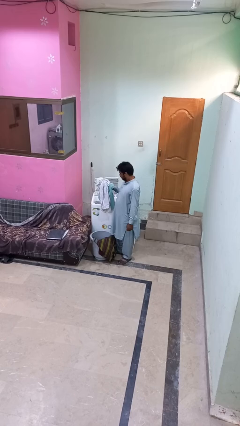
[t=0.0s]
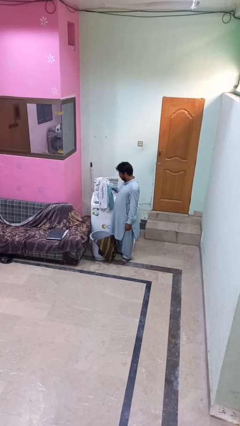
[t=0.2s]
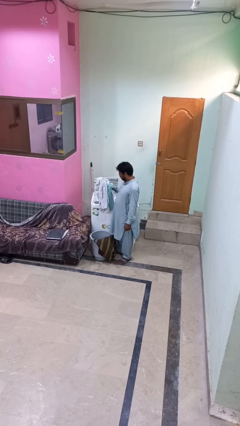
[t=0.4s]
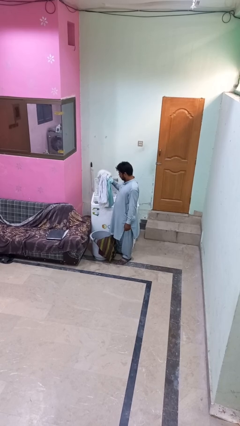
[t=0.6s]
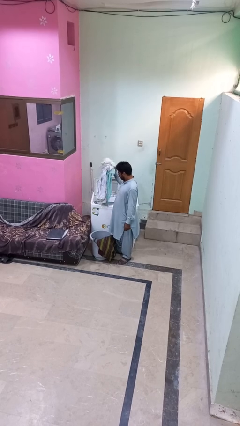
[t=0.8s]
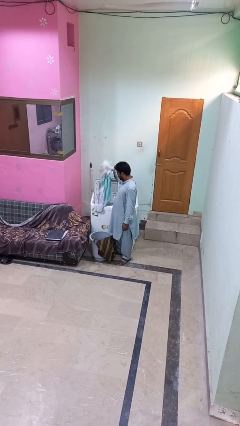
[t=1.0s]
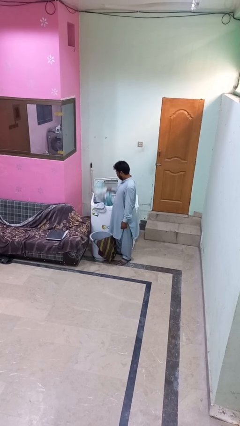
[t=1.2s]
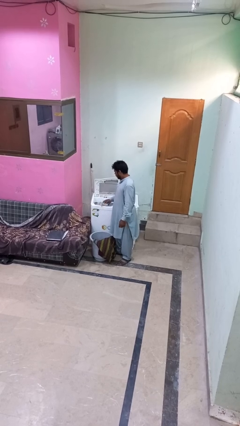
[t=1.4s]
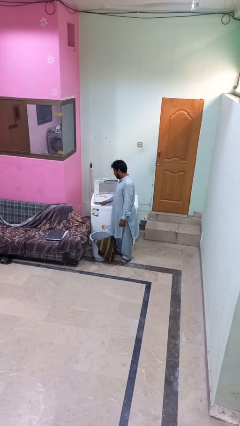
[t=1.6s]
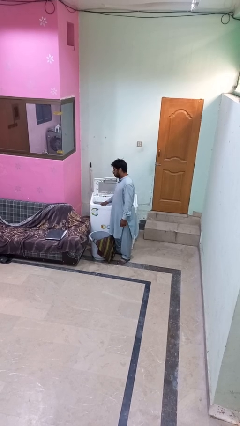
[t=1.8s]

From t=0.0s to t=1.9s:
person loads clotheswasher

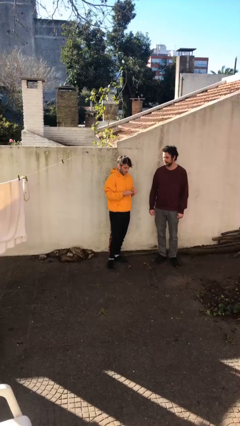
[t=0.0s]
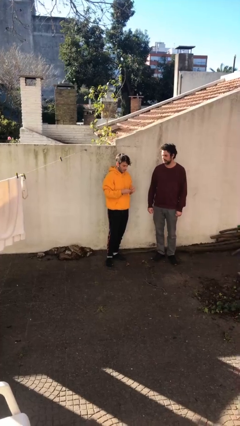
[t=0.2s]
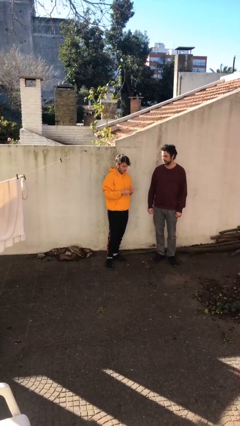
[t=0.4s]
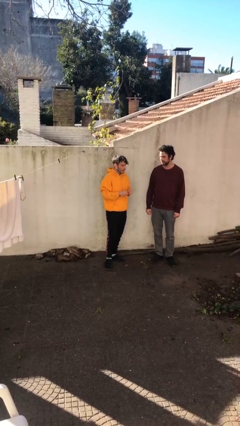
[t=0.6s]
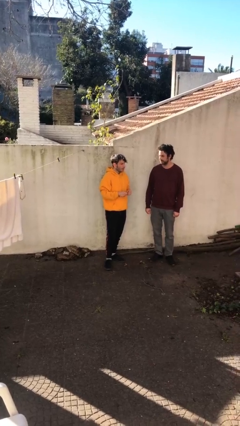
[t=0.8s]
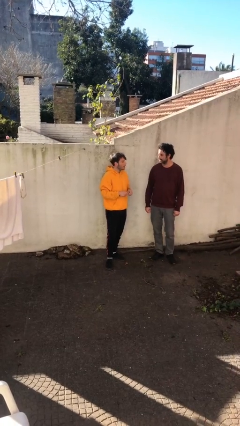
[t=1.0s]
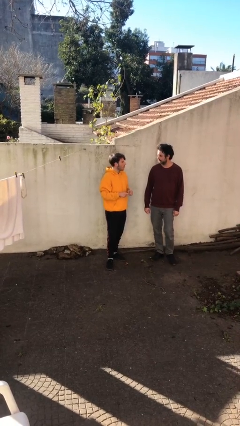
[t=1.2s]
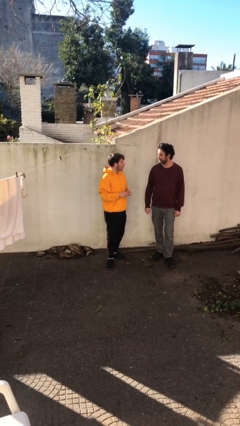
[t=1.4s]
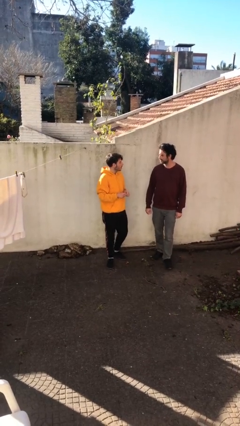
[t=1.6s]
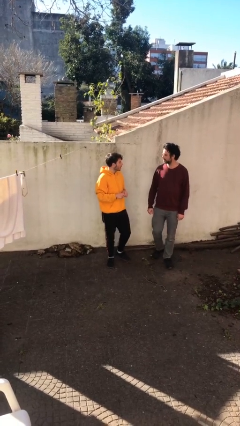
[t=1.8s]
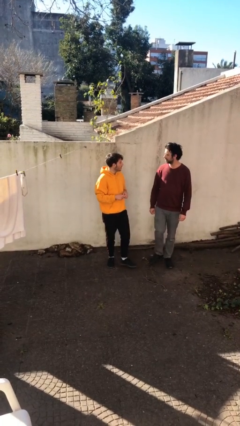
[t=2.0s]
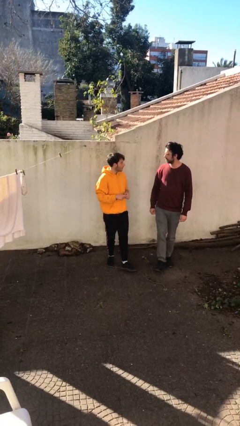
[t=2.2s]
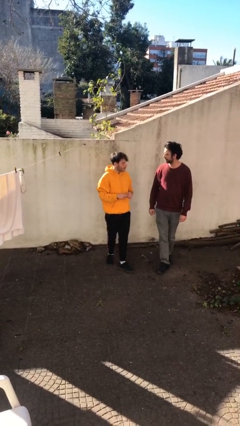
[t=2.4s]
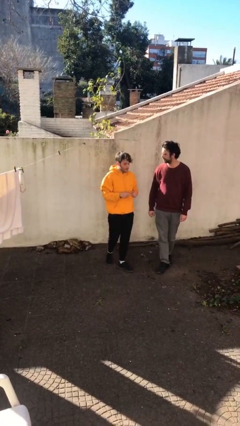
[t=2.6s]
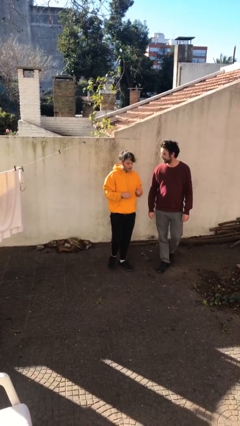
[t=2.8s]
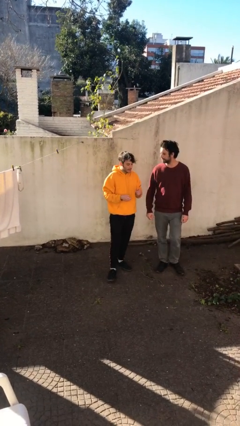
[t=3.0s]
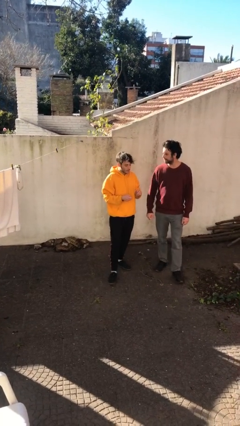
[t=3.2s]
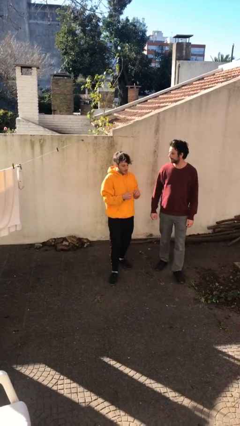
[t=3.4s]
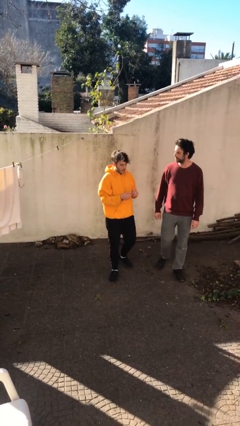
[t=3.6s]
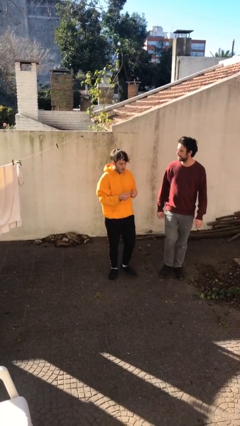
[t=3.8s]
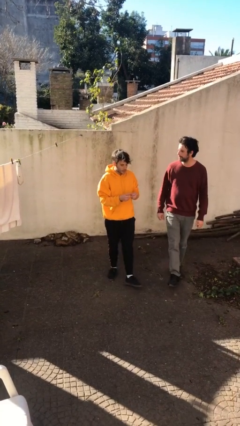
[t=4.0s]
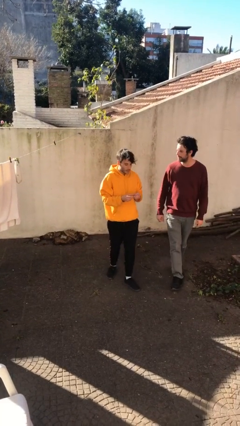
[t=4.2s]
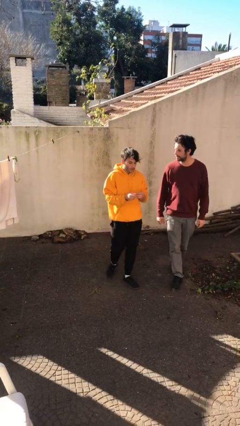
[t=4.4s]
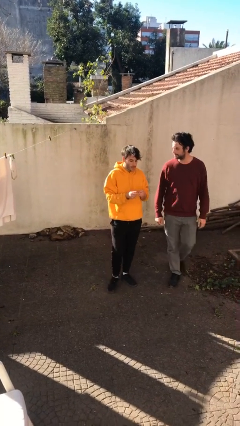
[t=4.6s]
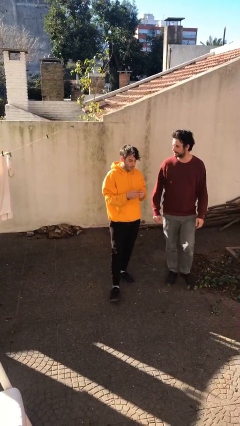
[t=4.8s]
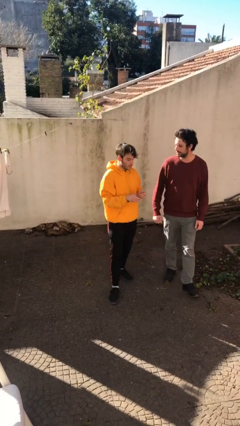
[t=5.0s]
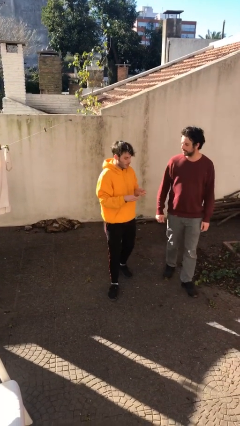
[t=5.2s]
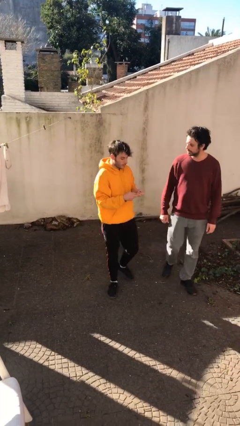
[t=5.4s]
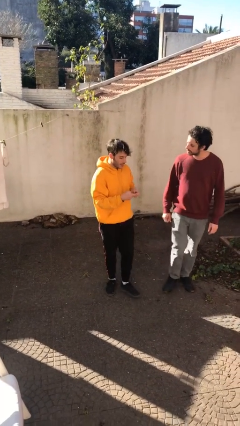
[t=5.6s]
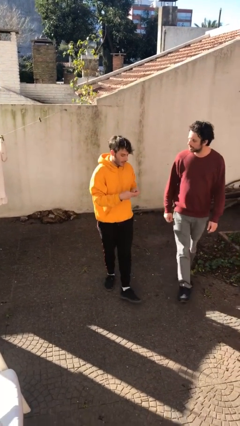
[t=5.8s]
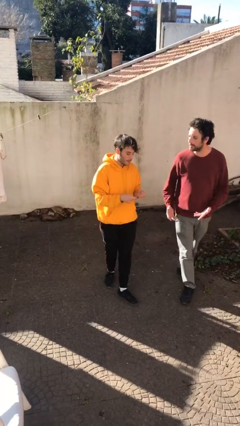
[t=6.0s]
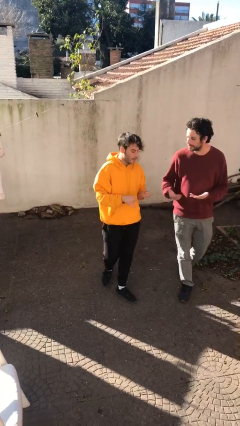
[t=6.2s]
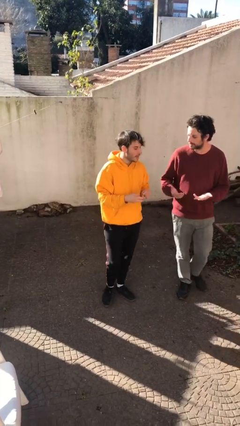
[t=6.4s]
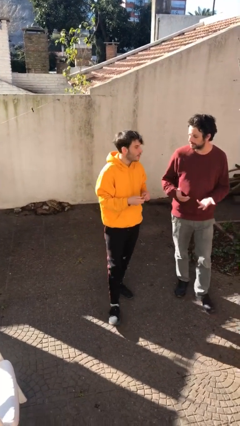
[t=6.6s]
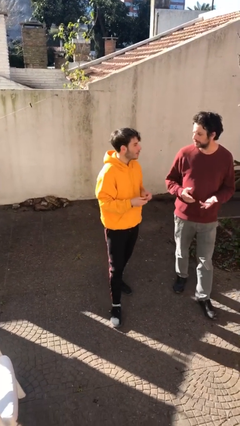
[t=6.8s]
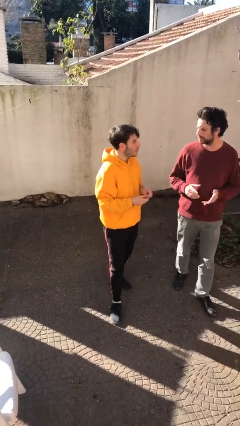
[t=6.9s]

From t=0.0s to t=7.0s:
person talks to person

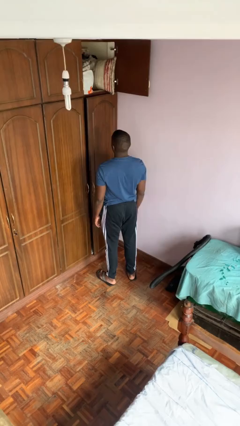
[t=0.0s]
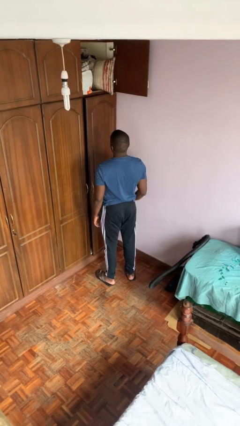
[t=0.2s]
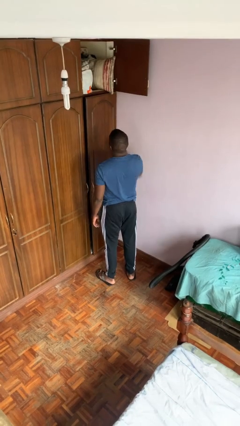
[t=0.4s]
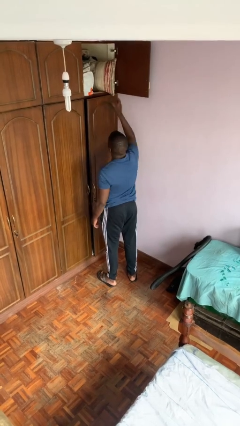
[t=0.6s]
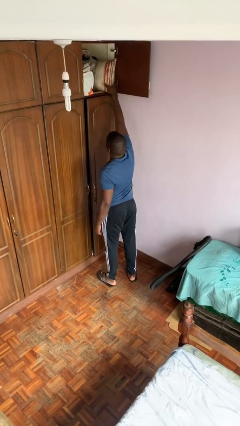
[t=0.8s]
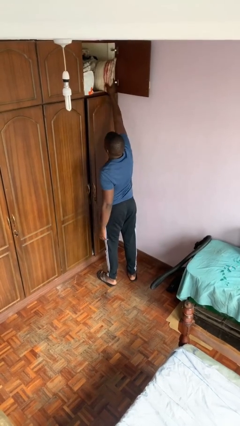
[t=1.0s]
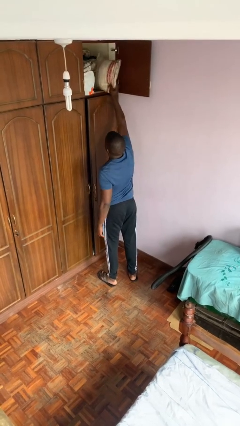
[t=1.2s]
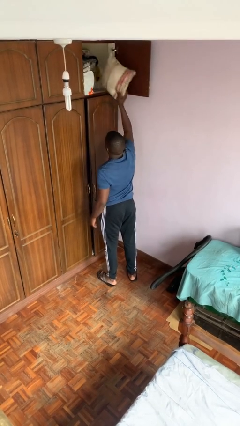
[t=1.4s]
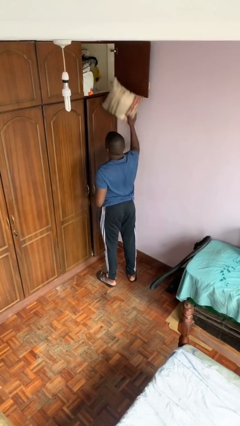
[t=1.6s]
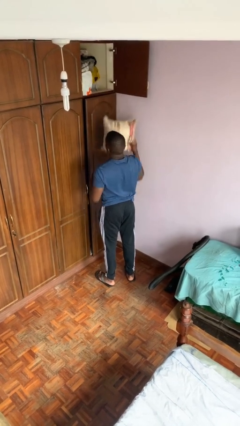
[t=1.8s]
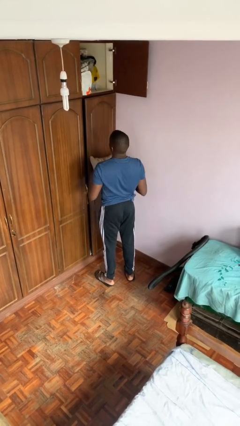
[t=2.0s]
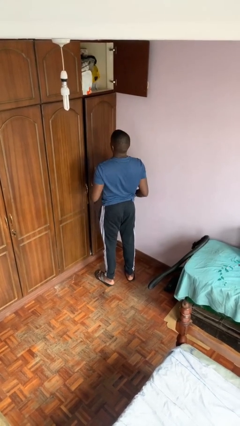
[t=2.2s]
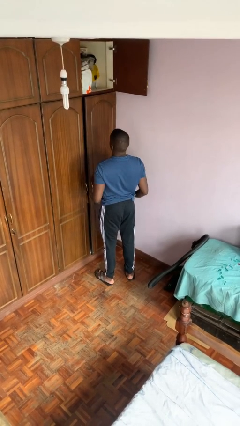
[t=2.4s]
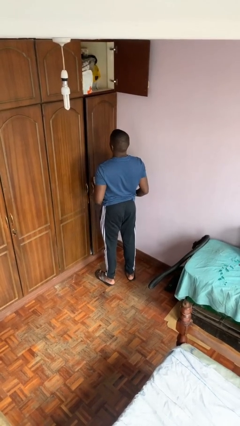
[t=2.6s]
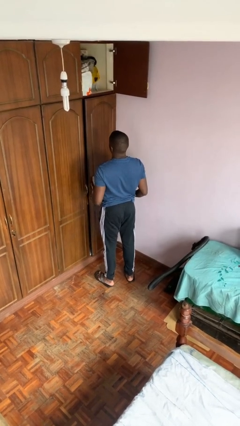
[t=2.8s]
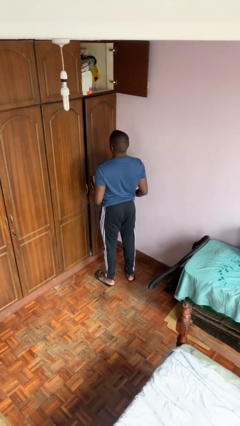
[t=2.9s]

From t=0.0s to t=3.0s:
person picks up object from shelf

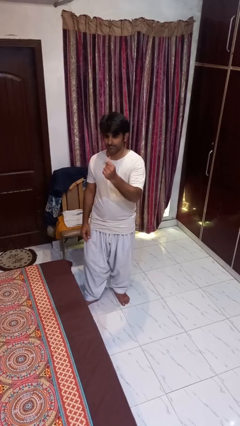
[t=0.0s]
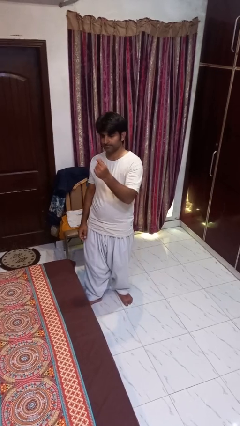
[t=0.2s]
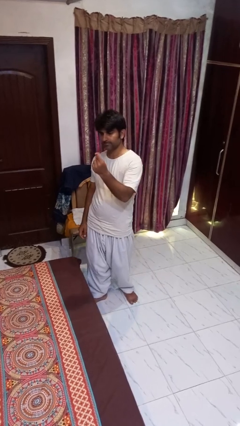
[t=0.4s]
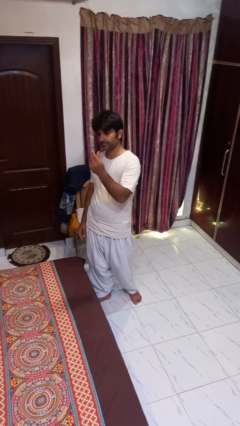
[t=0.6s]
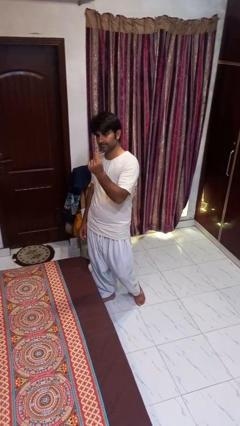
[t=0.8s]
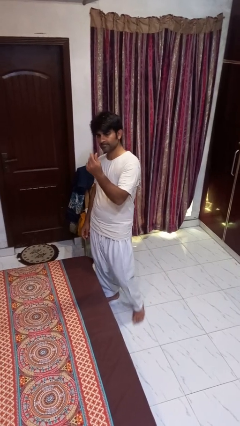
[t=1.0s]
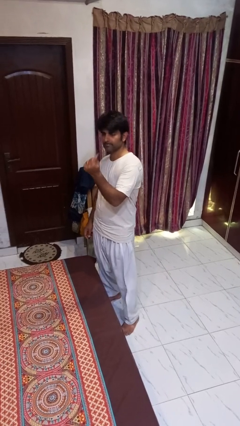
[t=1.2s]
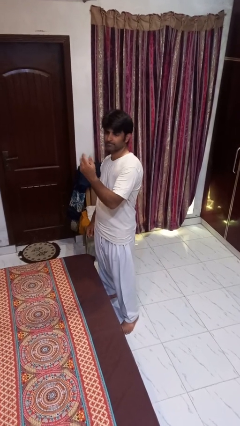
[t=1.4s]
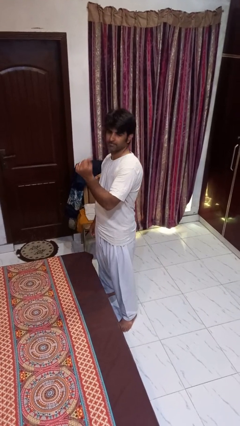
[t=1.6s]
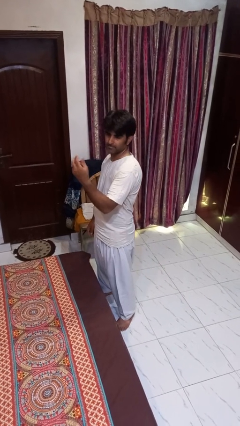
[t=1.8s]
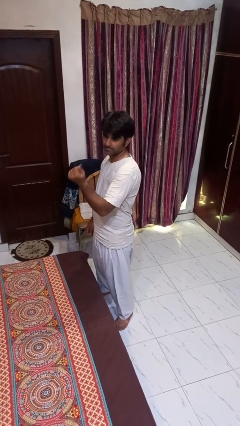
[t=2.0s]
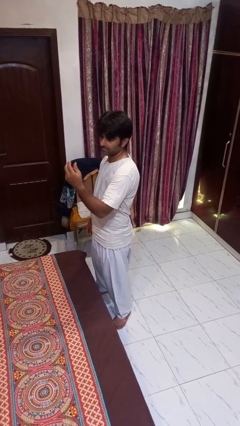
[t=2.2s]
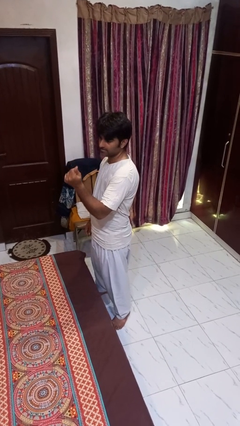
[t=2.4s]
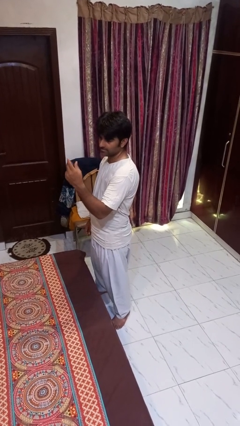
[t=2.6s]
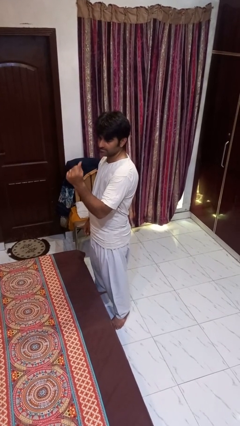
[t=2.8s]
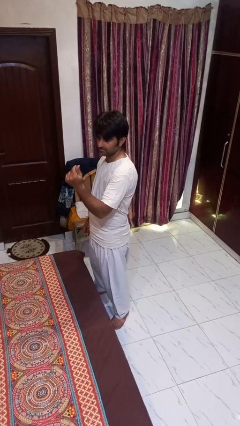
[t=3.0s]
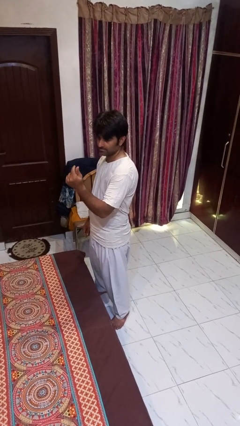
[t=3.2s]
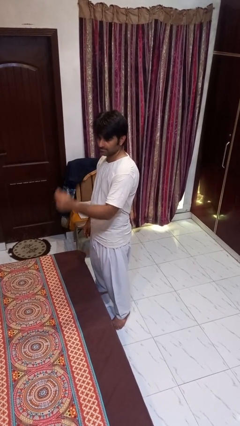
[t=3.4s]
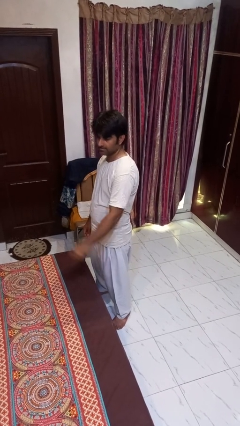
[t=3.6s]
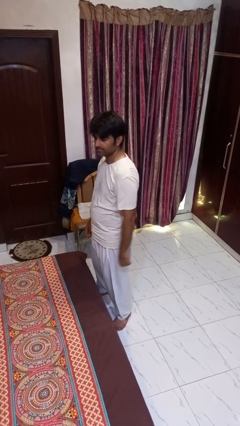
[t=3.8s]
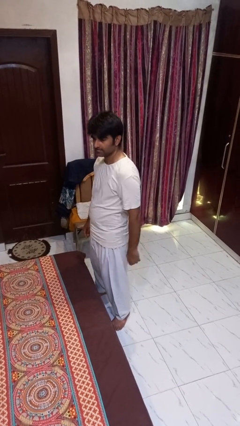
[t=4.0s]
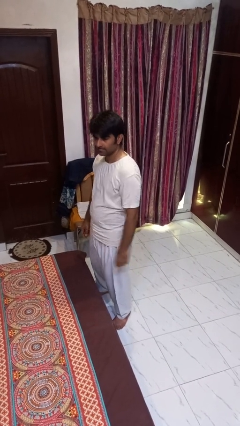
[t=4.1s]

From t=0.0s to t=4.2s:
person snaps fingers

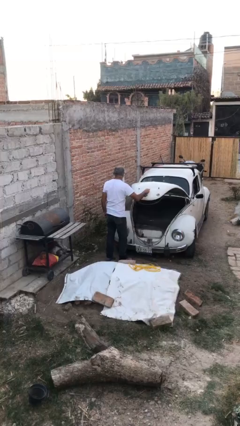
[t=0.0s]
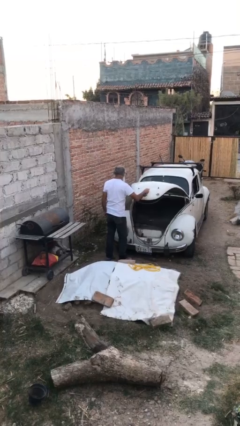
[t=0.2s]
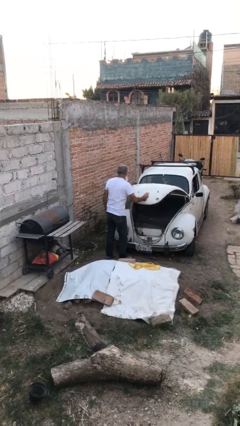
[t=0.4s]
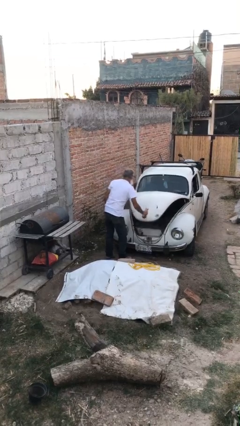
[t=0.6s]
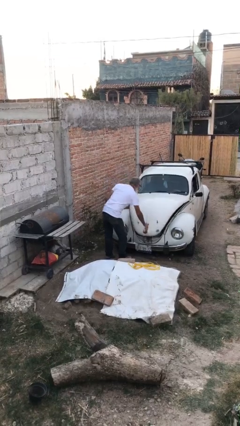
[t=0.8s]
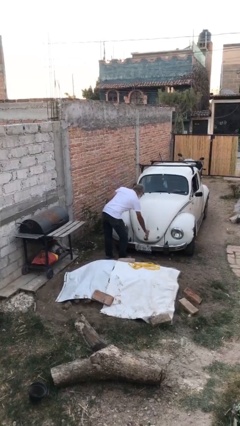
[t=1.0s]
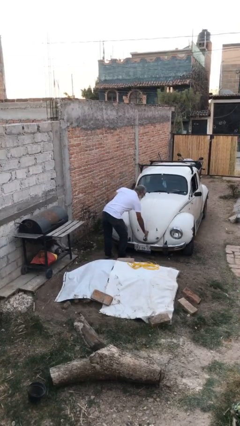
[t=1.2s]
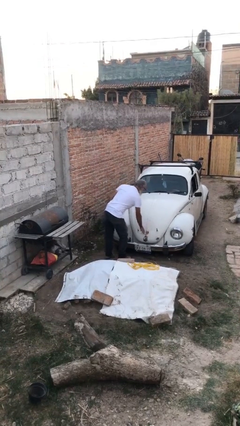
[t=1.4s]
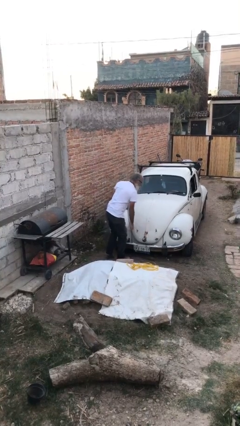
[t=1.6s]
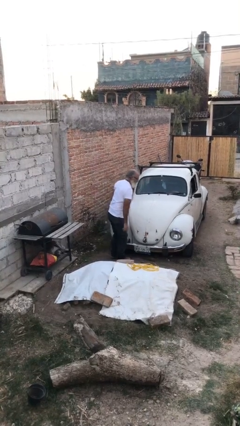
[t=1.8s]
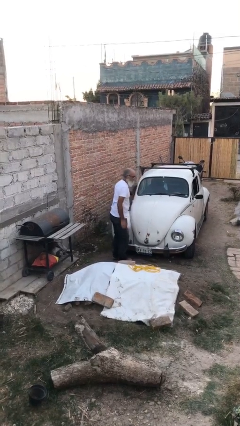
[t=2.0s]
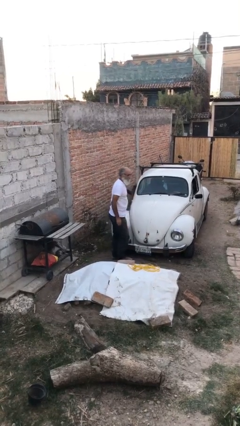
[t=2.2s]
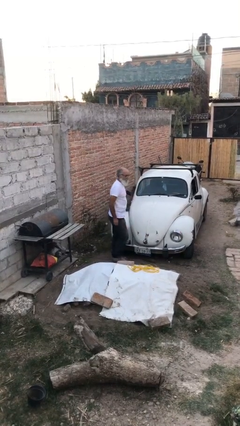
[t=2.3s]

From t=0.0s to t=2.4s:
person closes car trunk
